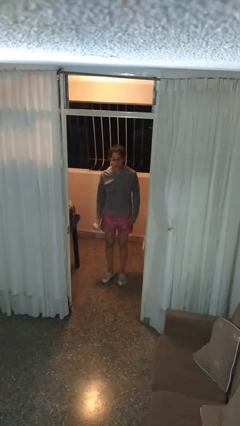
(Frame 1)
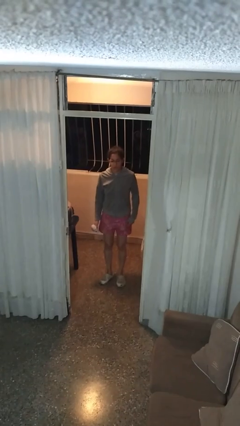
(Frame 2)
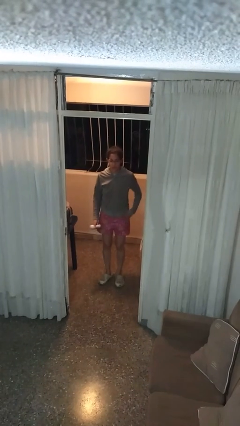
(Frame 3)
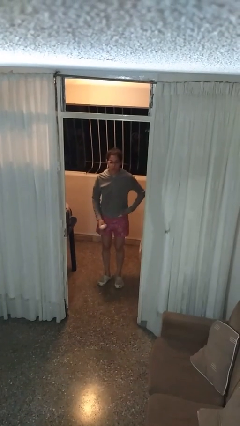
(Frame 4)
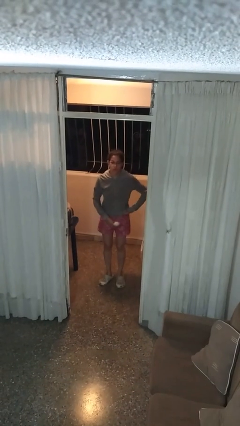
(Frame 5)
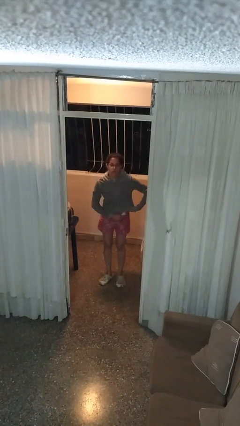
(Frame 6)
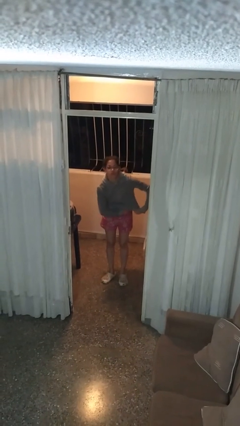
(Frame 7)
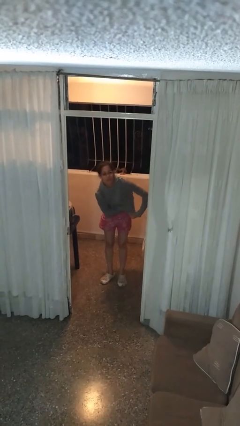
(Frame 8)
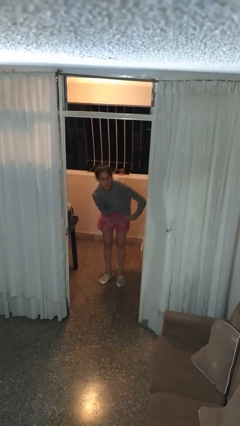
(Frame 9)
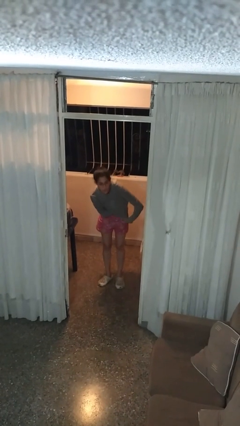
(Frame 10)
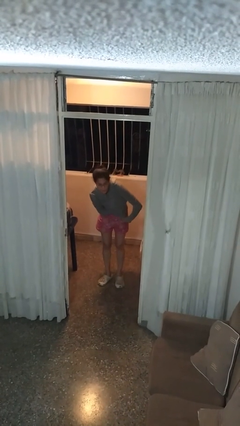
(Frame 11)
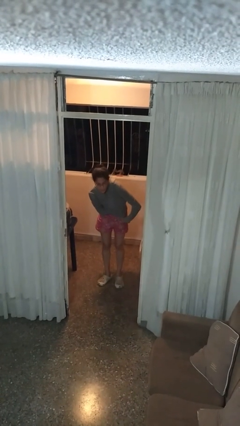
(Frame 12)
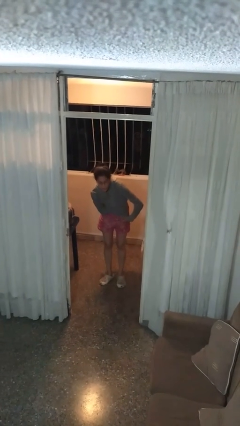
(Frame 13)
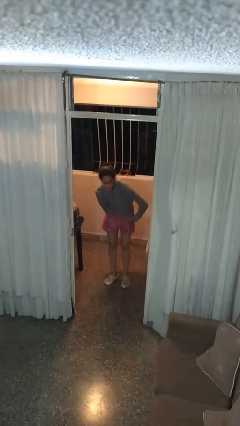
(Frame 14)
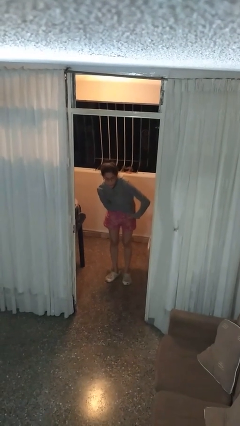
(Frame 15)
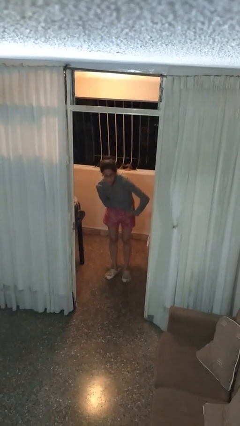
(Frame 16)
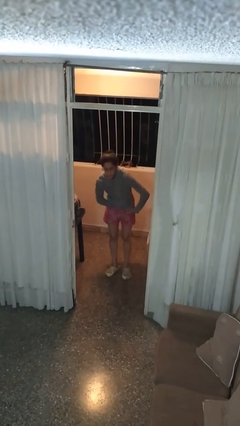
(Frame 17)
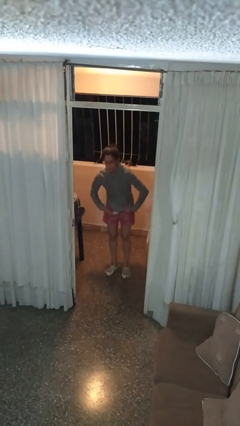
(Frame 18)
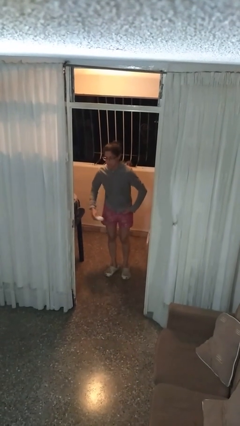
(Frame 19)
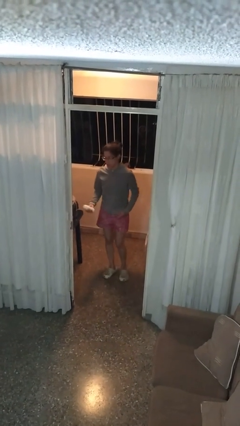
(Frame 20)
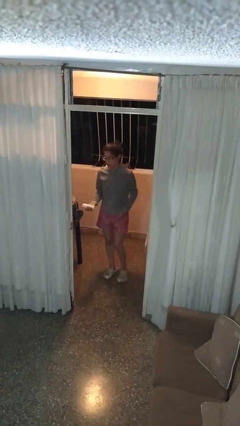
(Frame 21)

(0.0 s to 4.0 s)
person applies deodorant

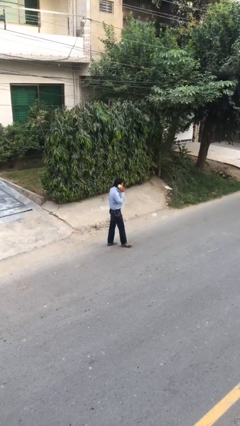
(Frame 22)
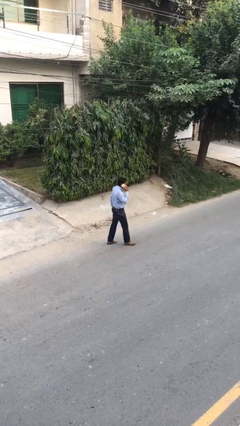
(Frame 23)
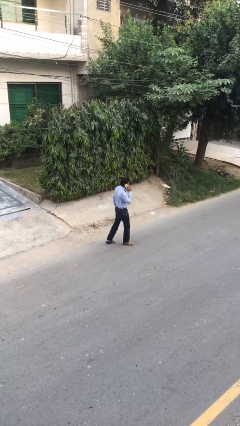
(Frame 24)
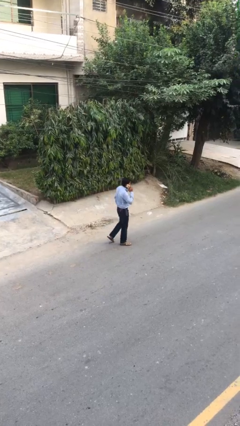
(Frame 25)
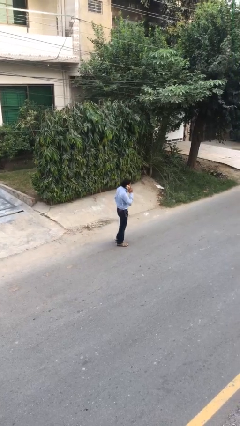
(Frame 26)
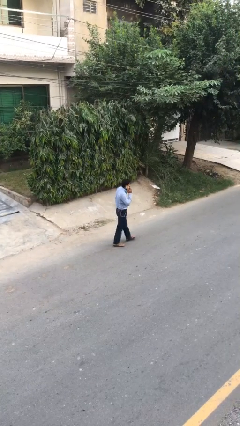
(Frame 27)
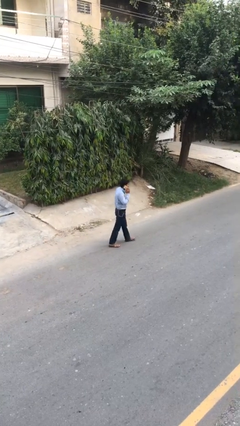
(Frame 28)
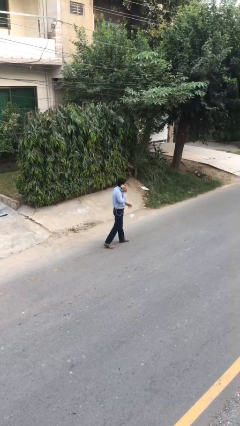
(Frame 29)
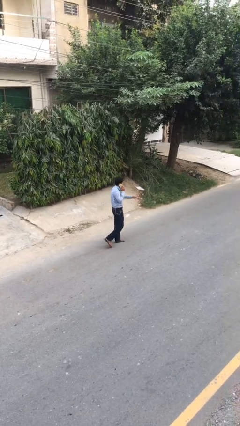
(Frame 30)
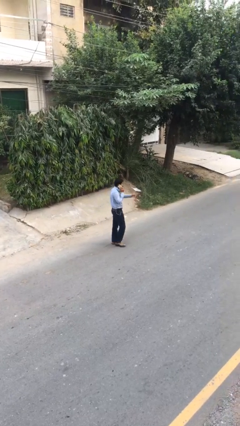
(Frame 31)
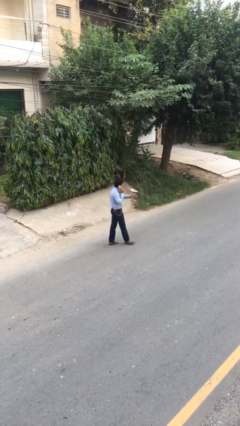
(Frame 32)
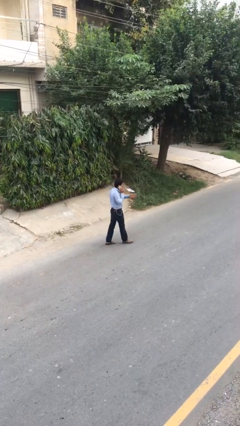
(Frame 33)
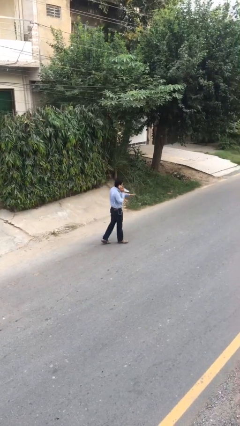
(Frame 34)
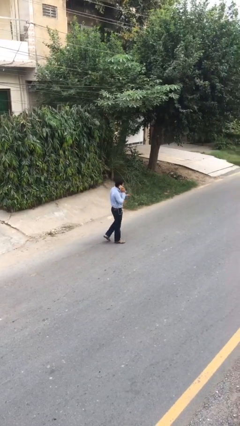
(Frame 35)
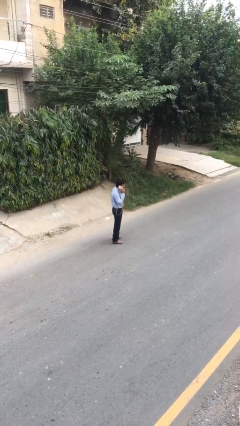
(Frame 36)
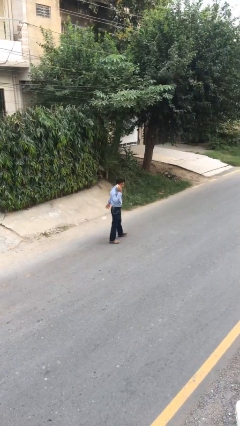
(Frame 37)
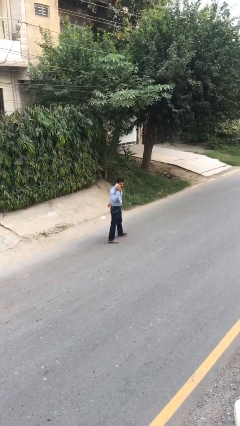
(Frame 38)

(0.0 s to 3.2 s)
person talks on phone

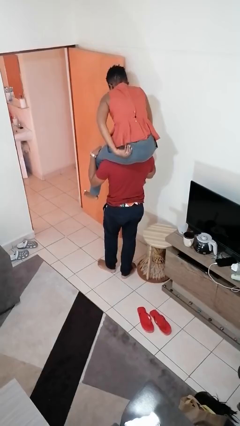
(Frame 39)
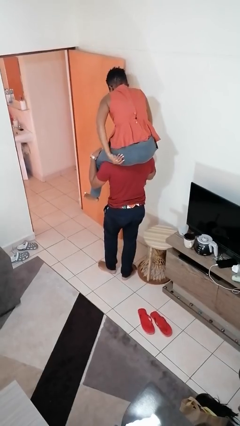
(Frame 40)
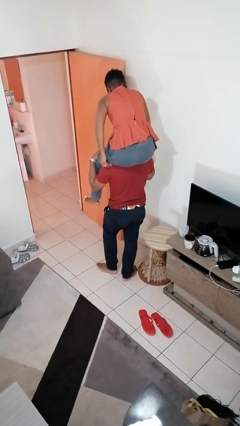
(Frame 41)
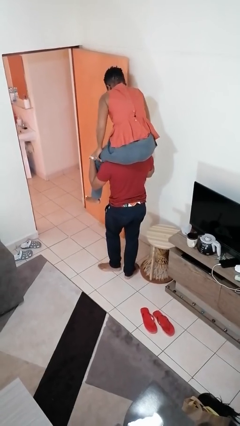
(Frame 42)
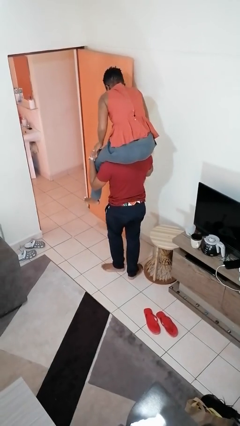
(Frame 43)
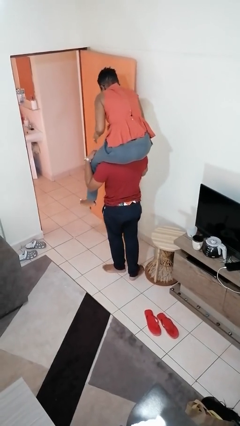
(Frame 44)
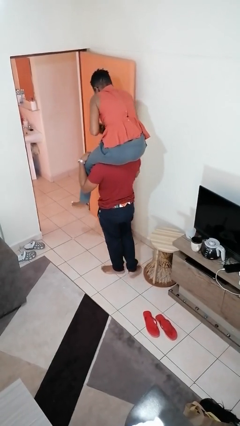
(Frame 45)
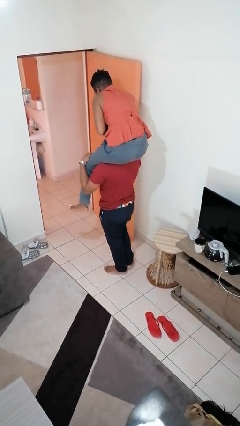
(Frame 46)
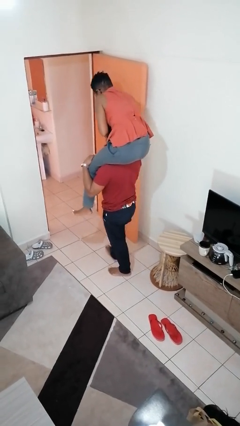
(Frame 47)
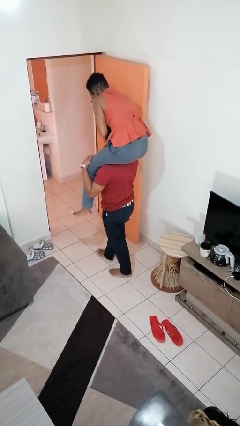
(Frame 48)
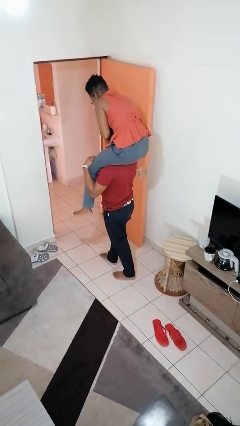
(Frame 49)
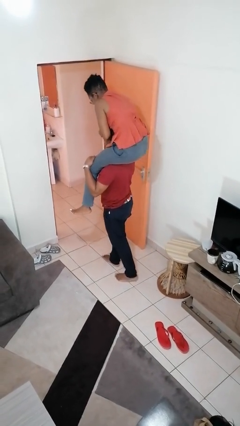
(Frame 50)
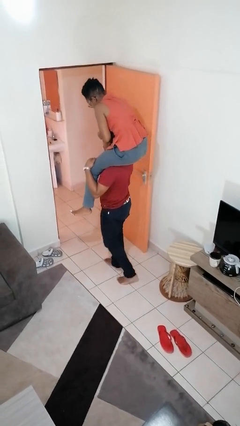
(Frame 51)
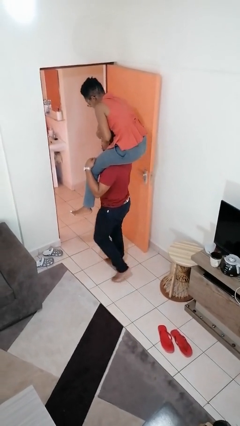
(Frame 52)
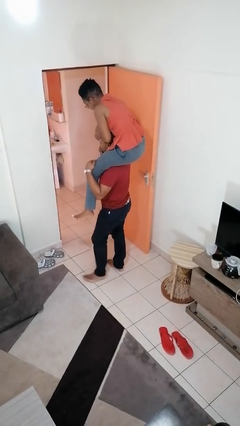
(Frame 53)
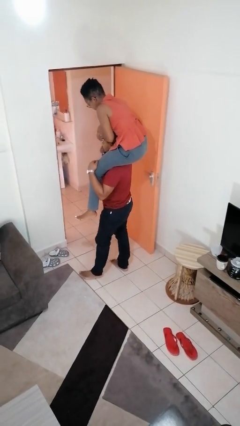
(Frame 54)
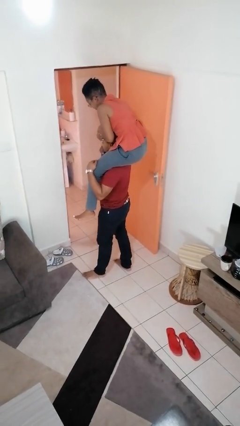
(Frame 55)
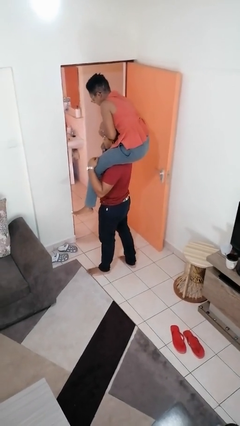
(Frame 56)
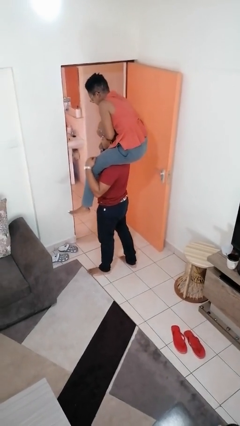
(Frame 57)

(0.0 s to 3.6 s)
person carries person on shoulders

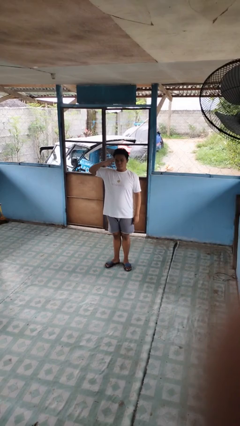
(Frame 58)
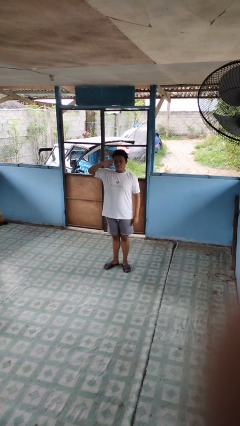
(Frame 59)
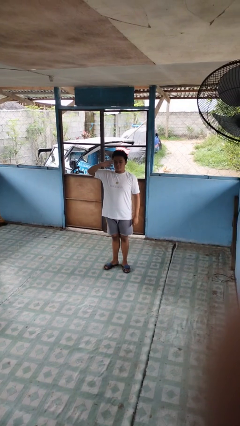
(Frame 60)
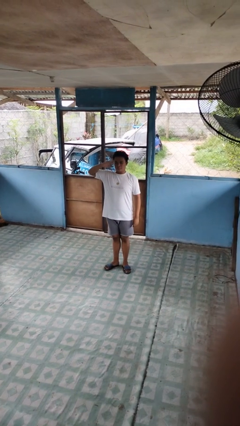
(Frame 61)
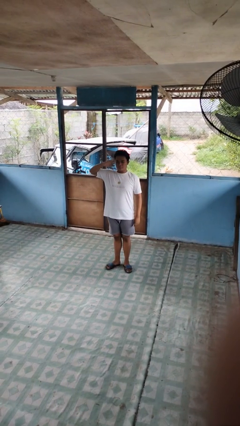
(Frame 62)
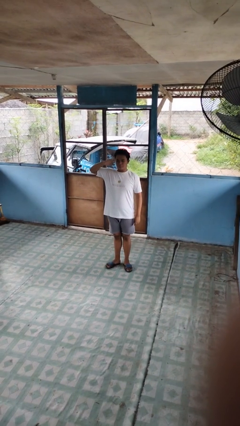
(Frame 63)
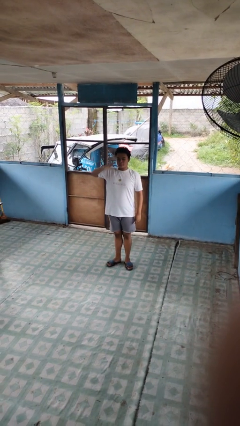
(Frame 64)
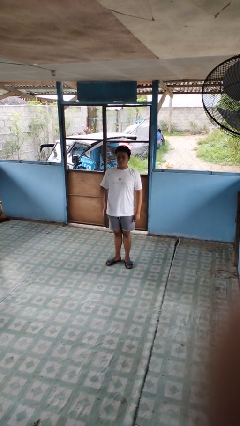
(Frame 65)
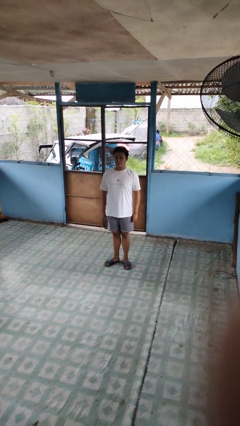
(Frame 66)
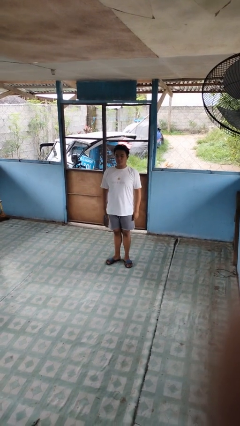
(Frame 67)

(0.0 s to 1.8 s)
person salutes

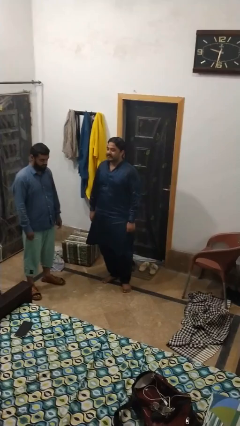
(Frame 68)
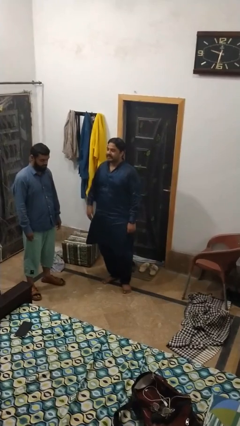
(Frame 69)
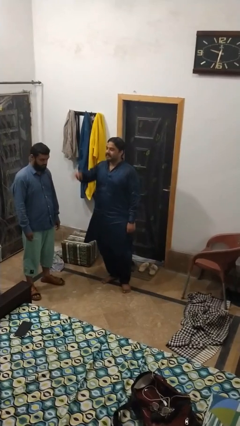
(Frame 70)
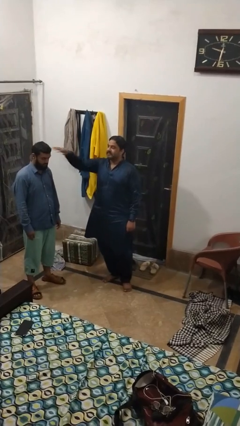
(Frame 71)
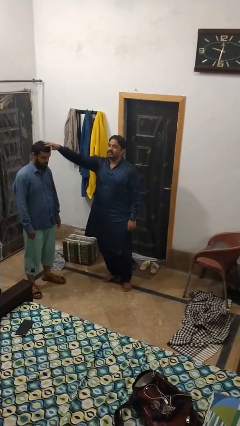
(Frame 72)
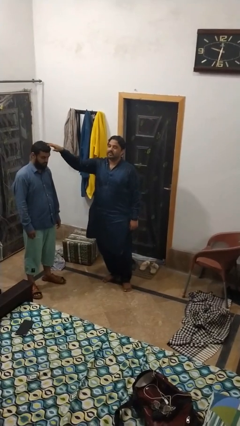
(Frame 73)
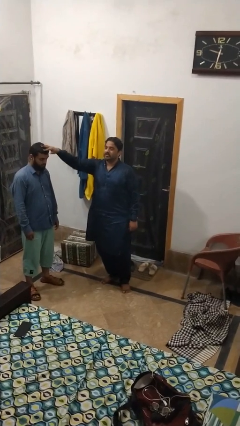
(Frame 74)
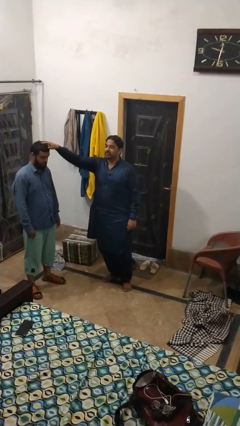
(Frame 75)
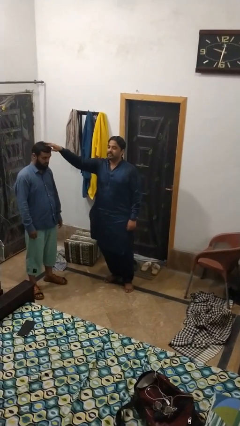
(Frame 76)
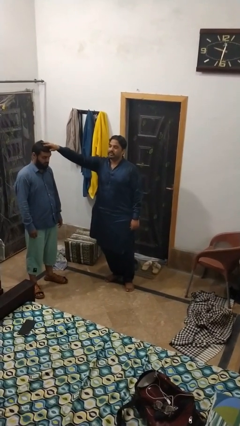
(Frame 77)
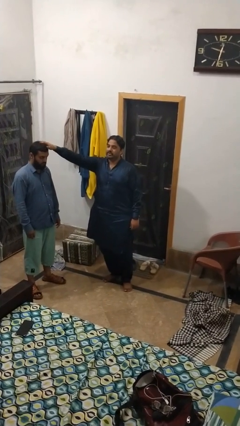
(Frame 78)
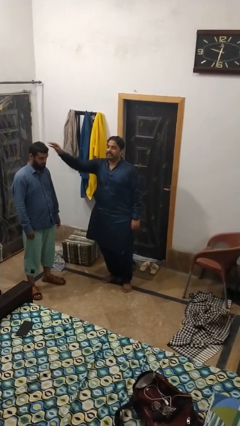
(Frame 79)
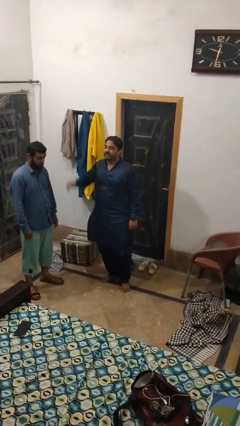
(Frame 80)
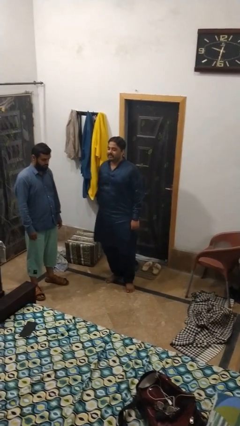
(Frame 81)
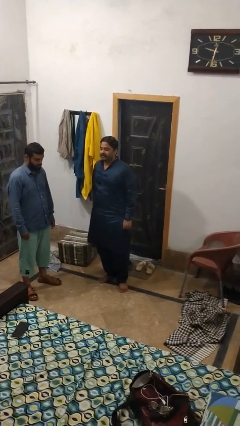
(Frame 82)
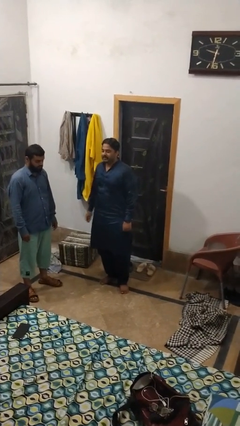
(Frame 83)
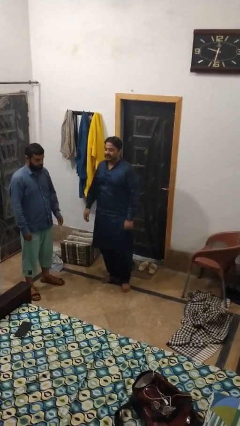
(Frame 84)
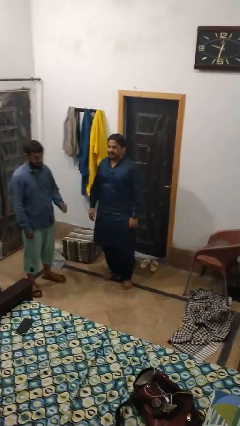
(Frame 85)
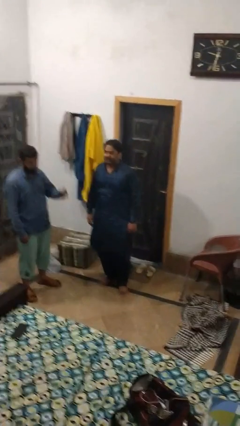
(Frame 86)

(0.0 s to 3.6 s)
person grabs person by hair

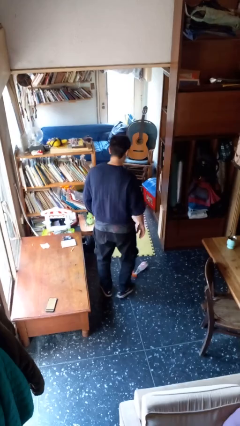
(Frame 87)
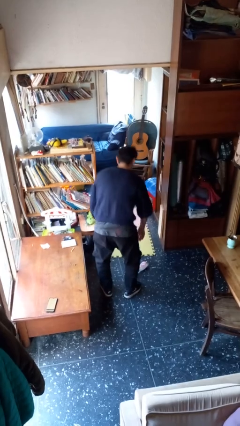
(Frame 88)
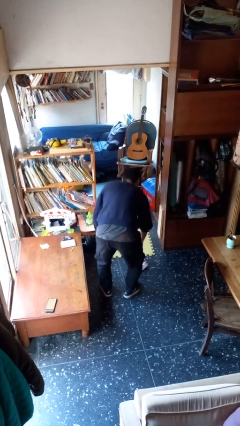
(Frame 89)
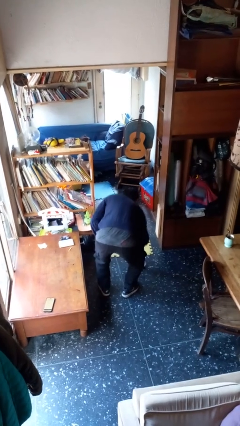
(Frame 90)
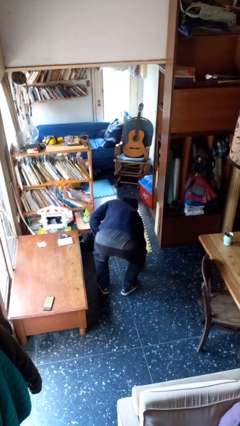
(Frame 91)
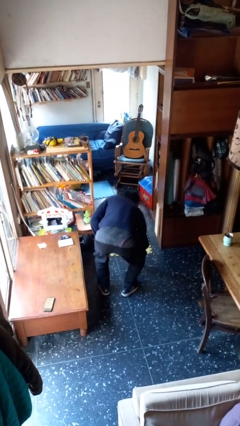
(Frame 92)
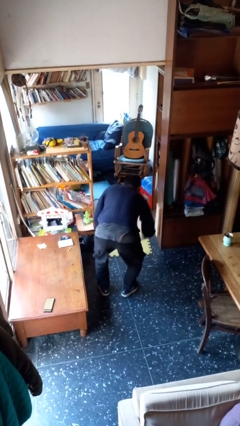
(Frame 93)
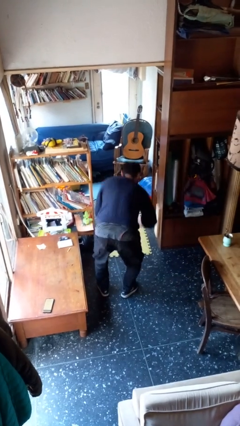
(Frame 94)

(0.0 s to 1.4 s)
person picks up object from floor
